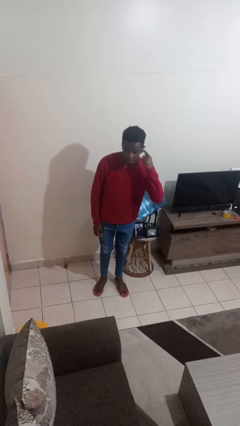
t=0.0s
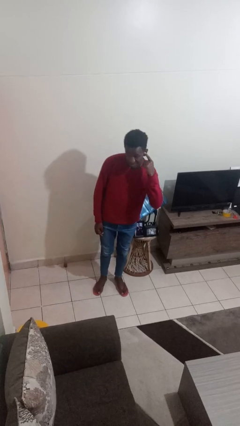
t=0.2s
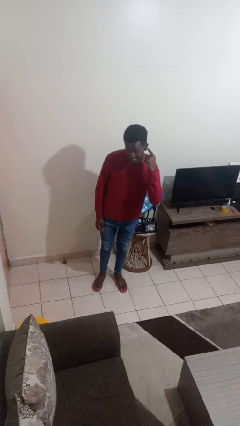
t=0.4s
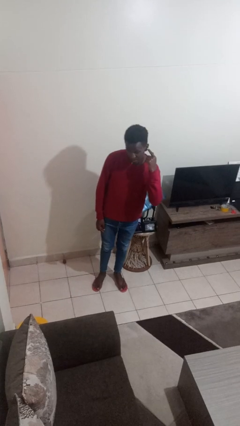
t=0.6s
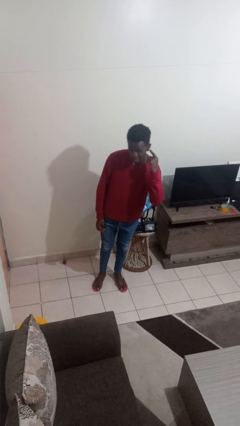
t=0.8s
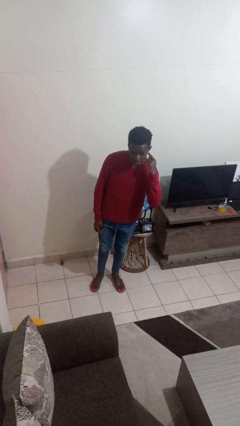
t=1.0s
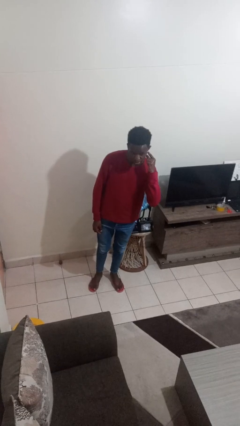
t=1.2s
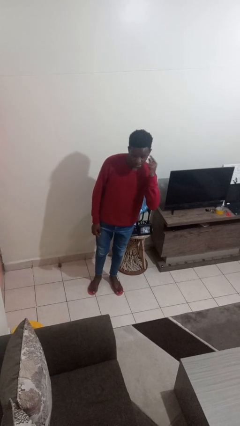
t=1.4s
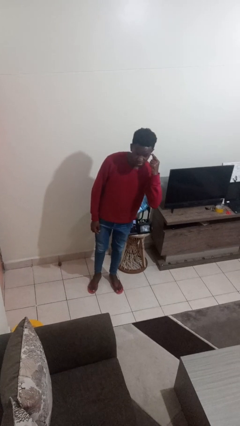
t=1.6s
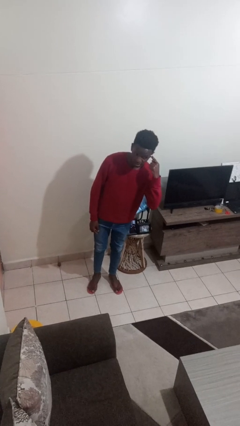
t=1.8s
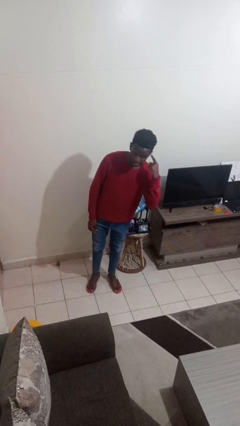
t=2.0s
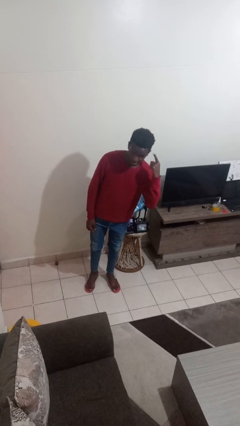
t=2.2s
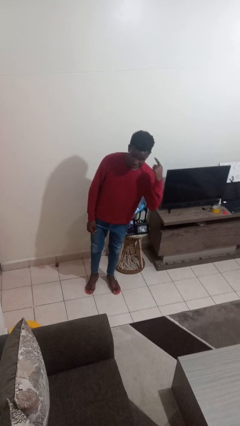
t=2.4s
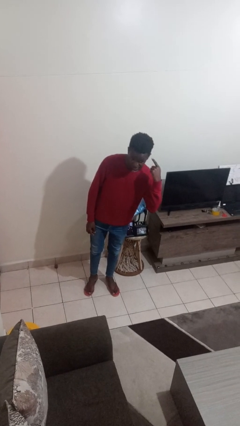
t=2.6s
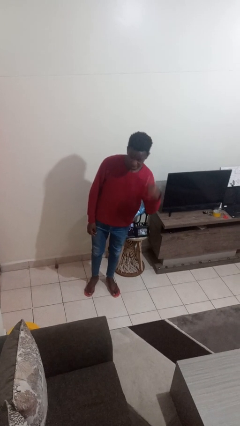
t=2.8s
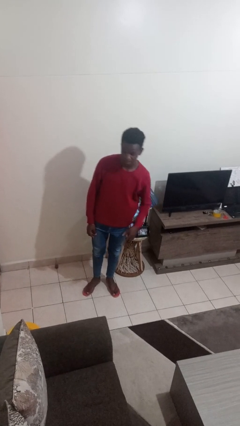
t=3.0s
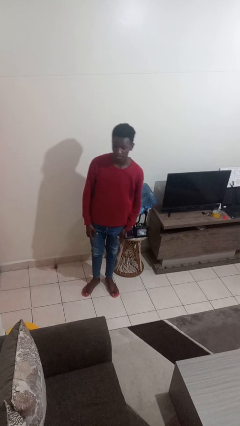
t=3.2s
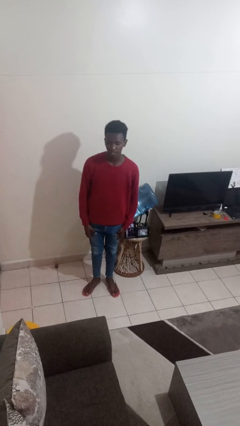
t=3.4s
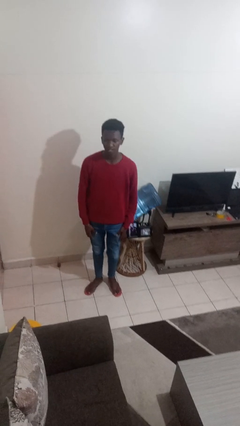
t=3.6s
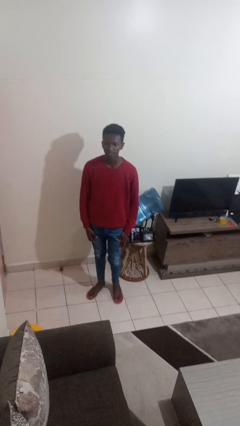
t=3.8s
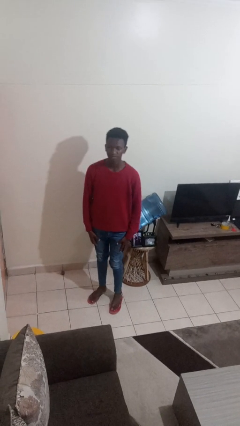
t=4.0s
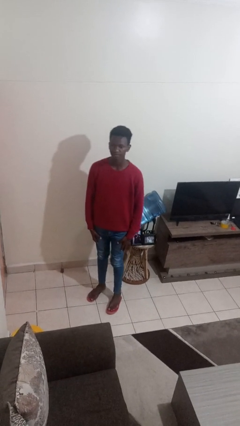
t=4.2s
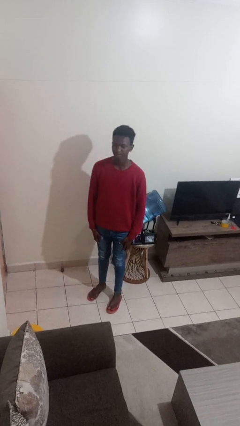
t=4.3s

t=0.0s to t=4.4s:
person gestures listen closely

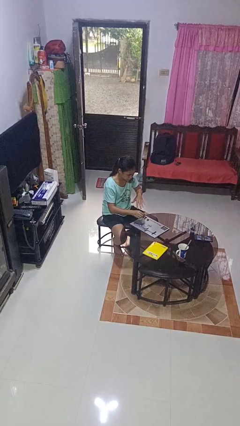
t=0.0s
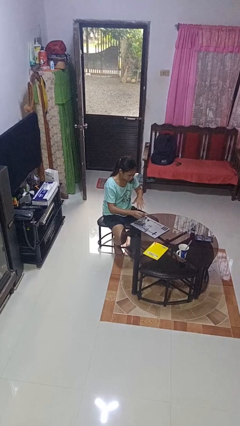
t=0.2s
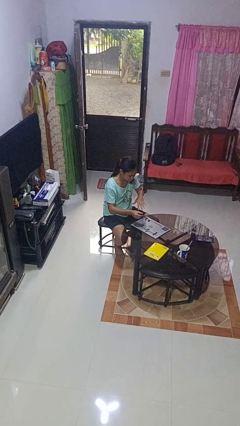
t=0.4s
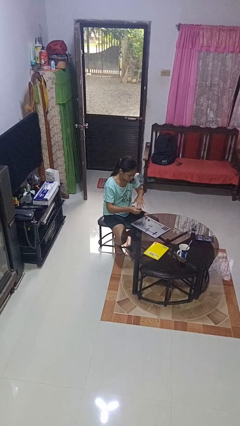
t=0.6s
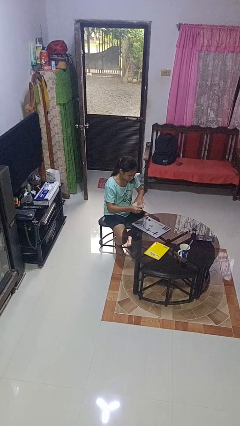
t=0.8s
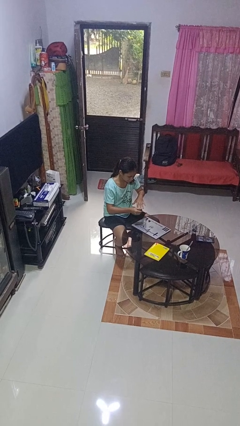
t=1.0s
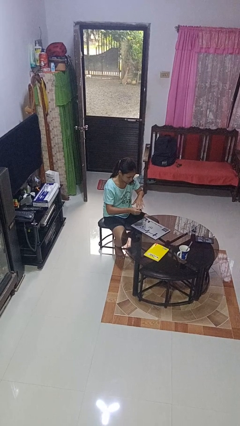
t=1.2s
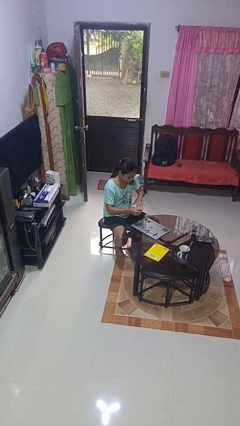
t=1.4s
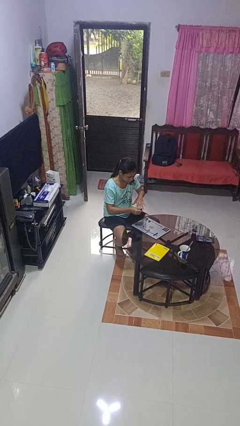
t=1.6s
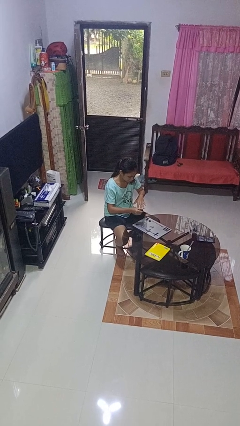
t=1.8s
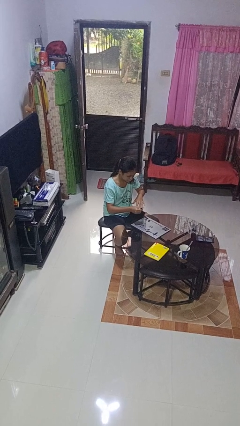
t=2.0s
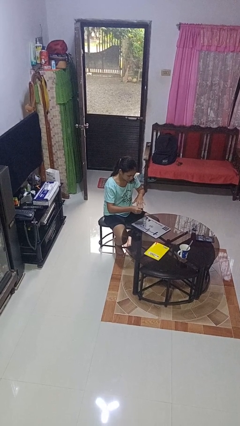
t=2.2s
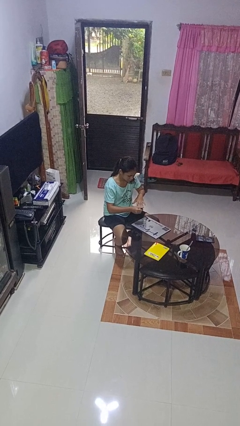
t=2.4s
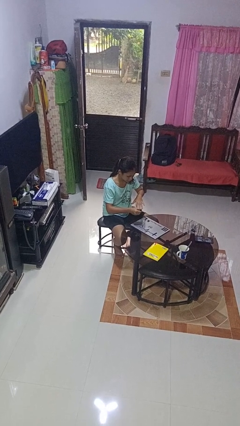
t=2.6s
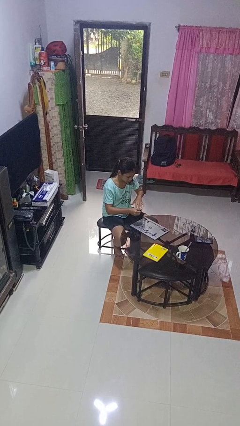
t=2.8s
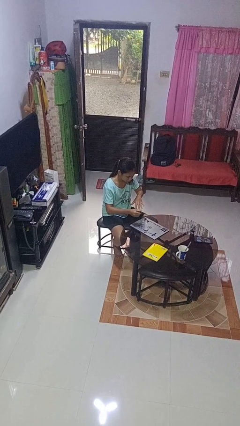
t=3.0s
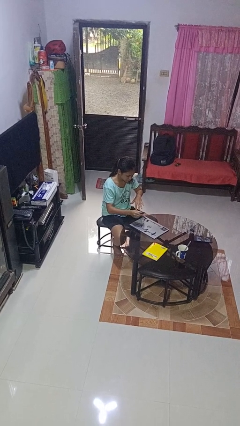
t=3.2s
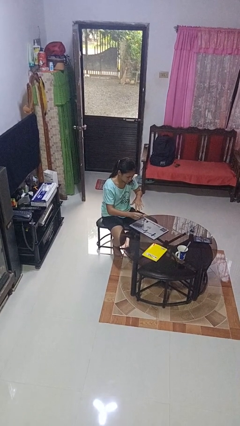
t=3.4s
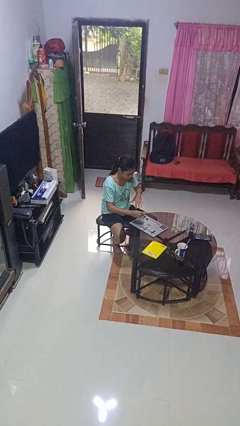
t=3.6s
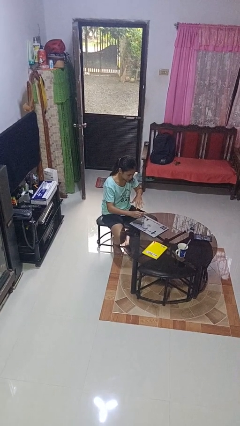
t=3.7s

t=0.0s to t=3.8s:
person paints fingernails

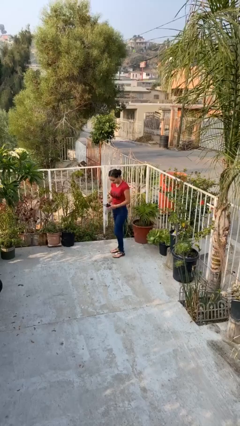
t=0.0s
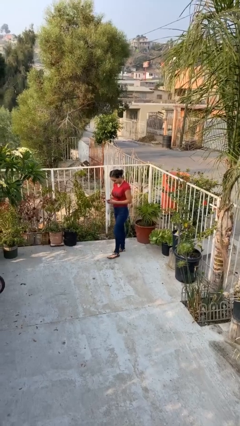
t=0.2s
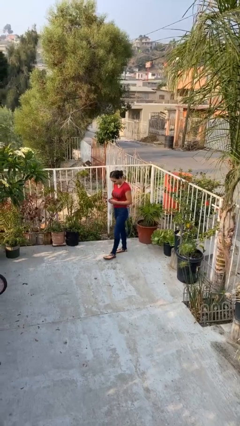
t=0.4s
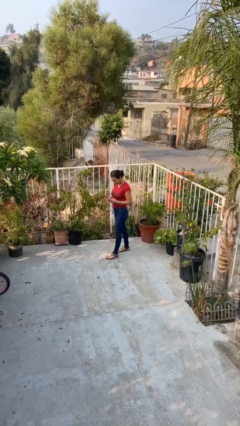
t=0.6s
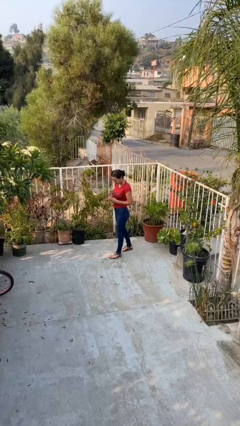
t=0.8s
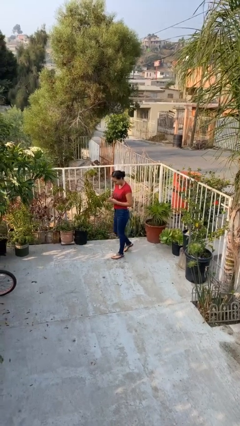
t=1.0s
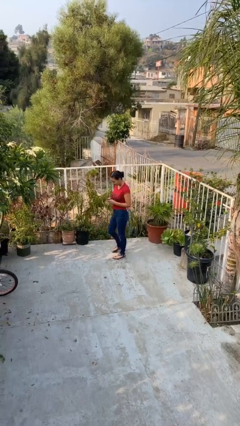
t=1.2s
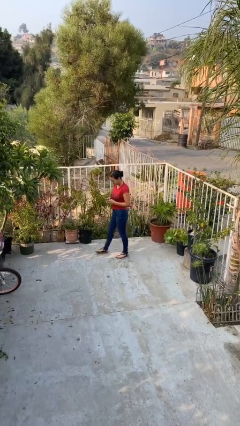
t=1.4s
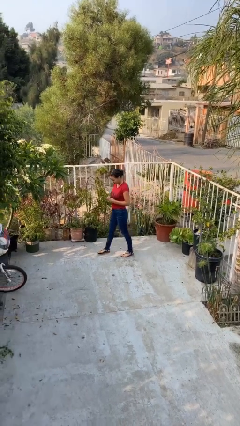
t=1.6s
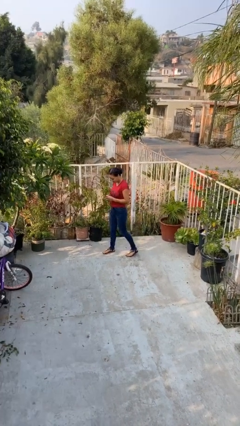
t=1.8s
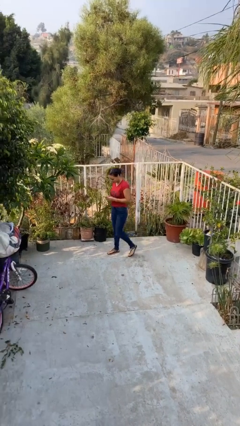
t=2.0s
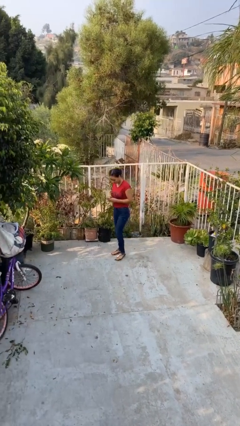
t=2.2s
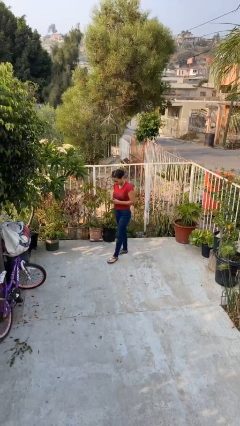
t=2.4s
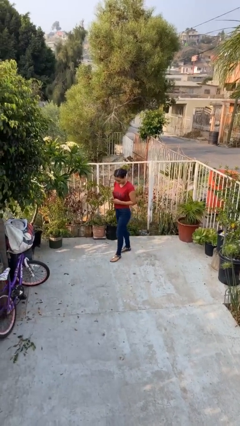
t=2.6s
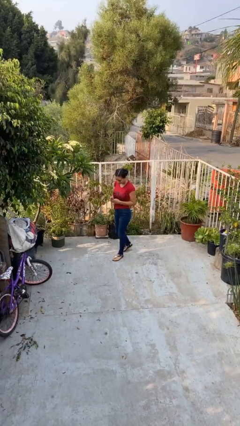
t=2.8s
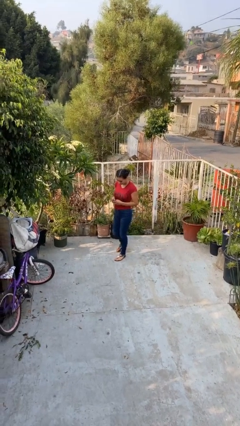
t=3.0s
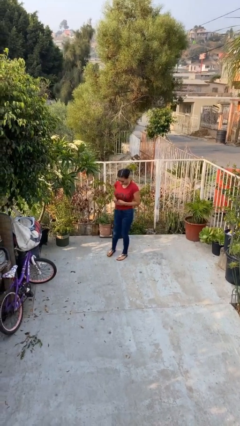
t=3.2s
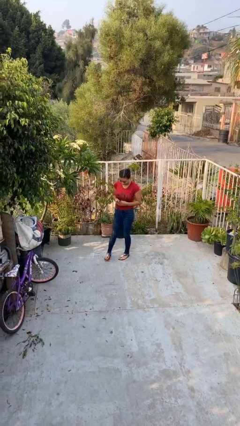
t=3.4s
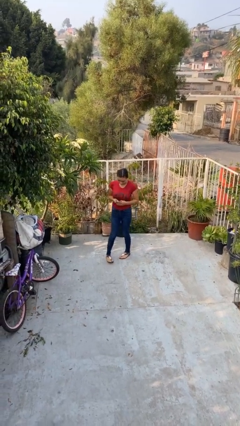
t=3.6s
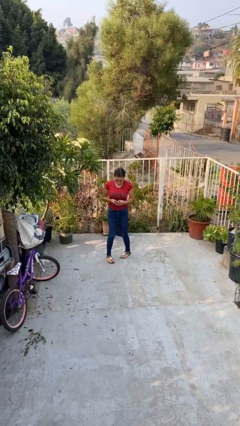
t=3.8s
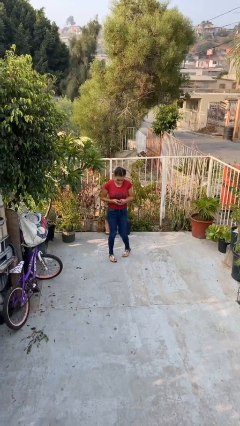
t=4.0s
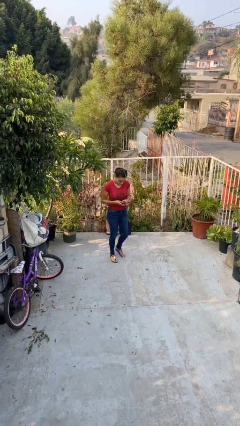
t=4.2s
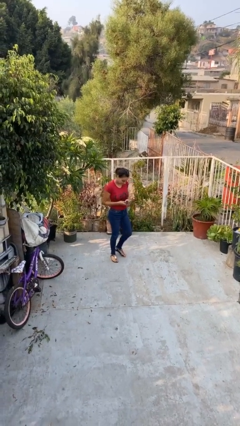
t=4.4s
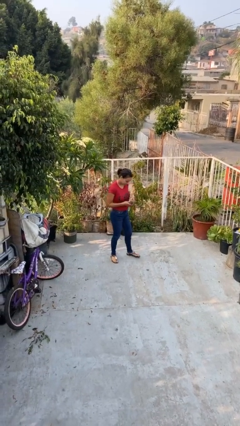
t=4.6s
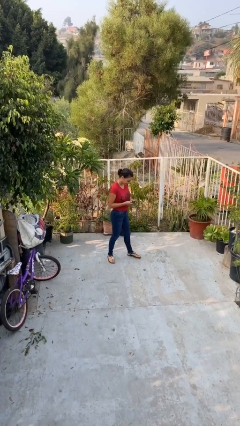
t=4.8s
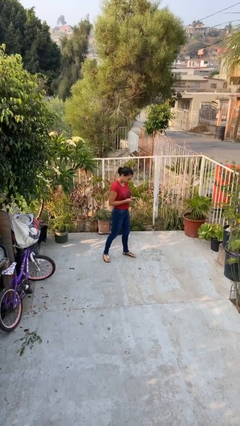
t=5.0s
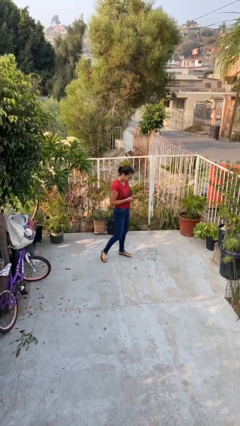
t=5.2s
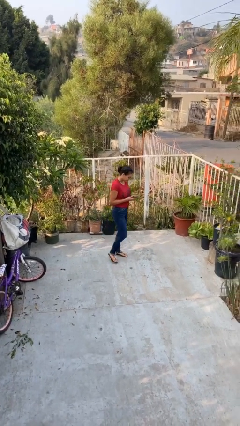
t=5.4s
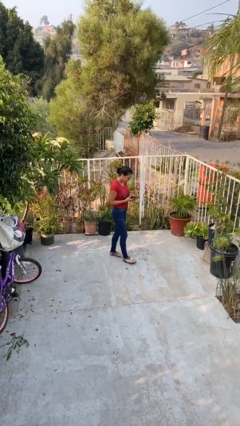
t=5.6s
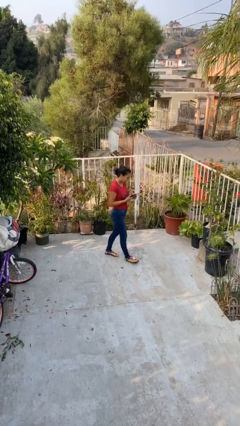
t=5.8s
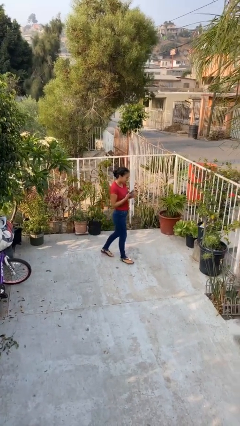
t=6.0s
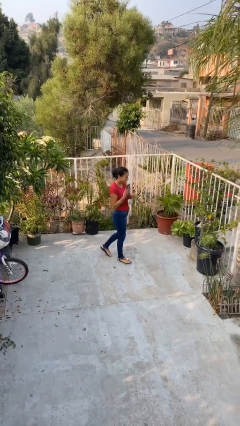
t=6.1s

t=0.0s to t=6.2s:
person texts on phone

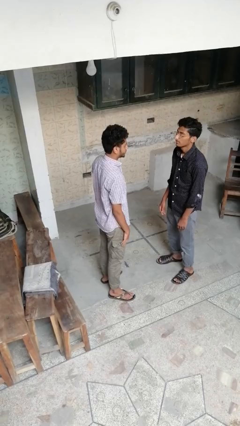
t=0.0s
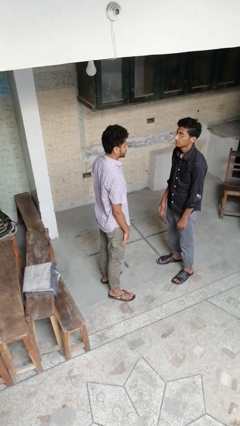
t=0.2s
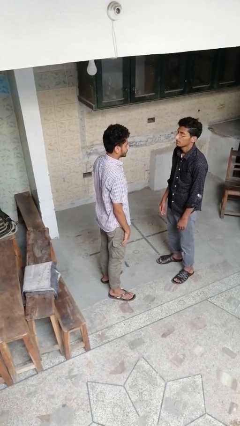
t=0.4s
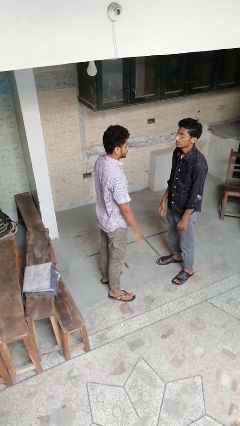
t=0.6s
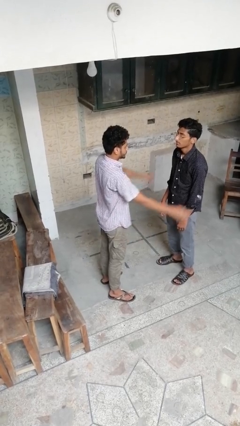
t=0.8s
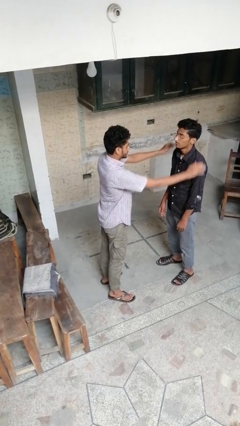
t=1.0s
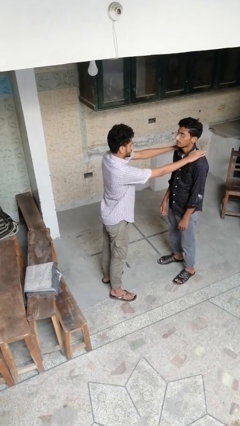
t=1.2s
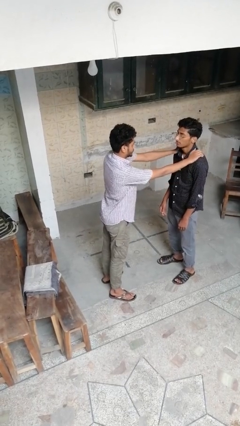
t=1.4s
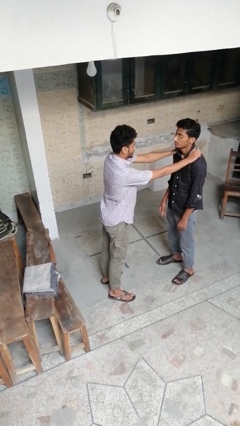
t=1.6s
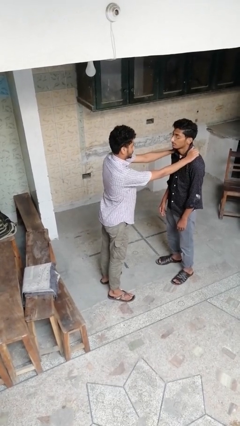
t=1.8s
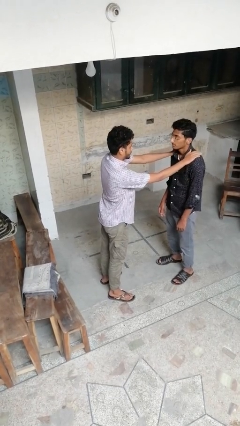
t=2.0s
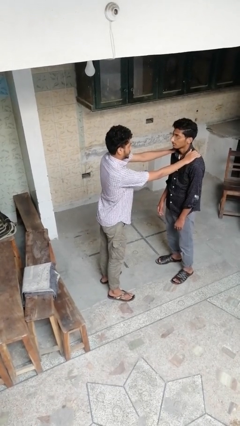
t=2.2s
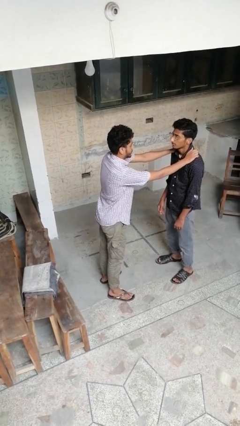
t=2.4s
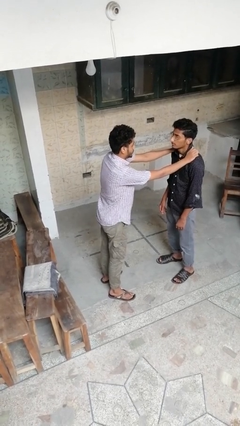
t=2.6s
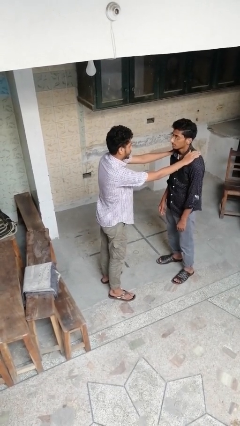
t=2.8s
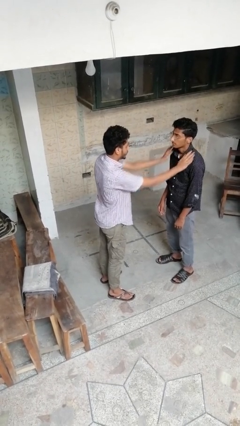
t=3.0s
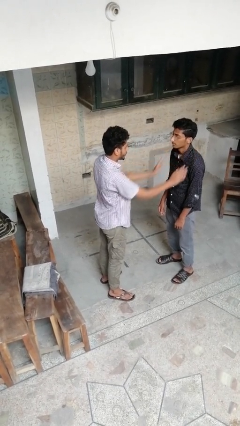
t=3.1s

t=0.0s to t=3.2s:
person pounds shoulders of person
